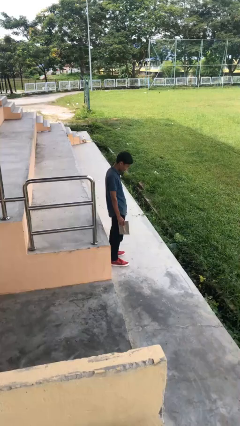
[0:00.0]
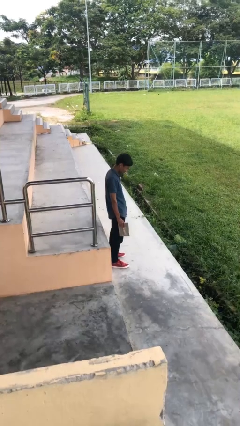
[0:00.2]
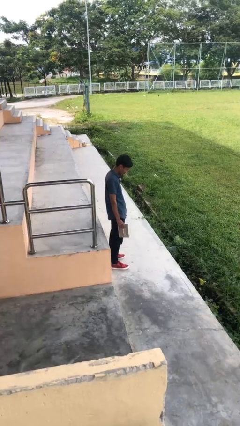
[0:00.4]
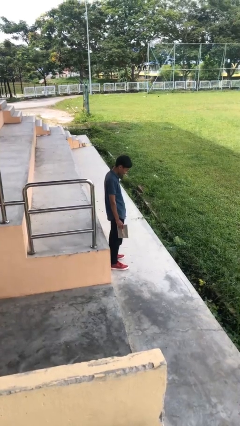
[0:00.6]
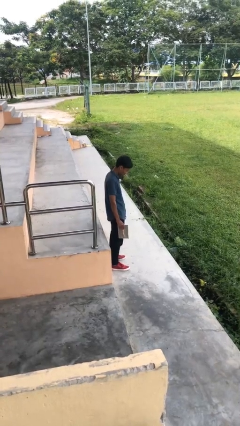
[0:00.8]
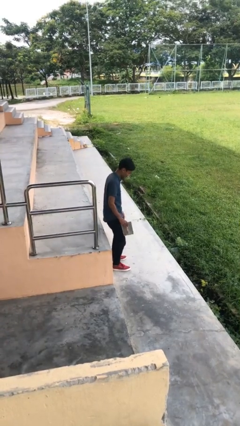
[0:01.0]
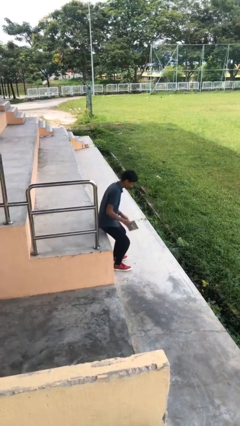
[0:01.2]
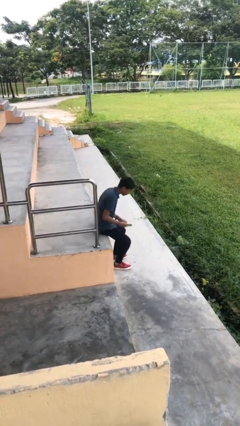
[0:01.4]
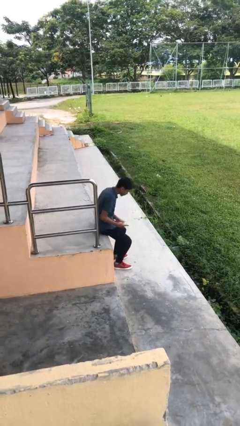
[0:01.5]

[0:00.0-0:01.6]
person sits down

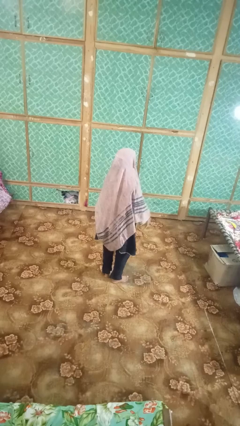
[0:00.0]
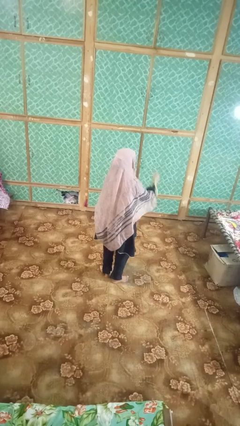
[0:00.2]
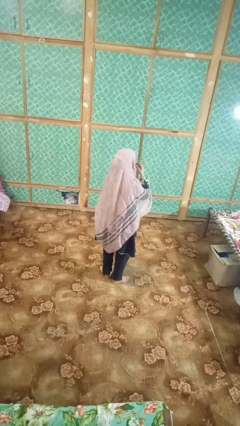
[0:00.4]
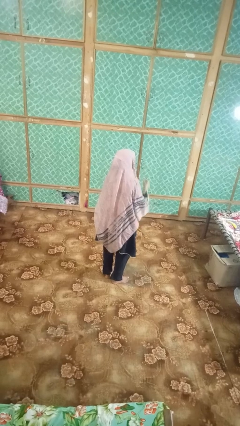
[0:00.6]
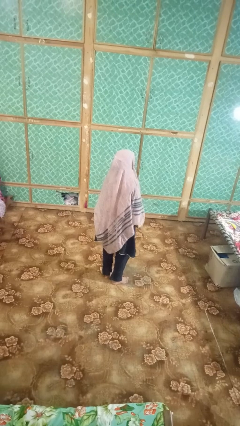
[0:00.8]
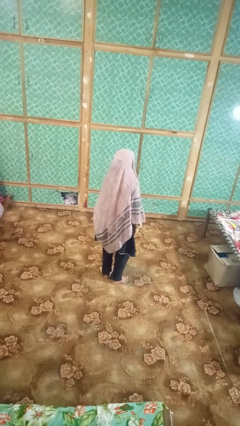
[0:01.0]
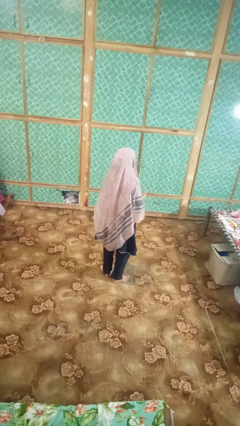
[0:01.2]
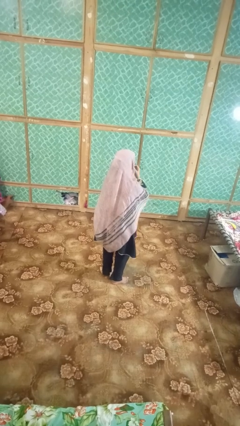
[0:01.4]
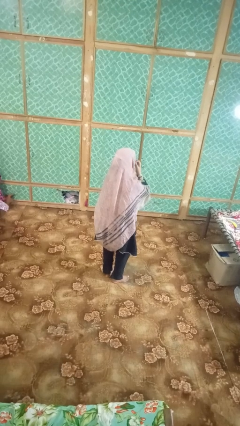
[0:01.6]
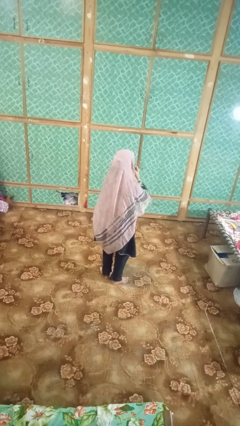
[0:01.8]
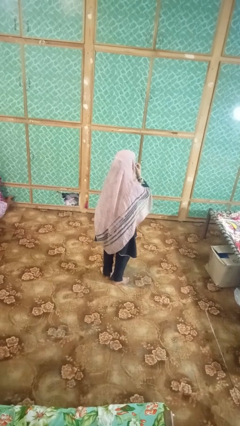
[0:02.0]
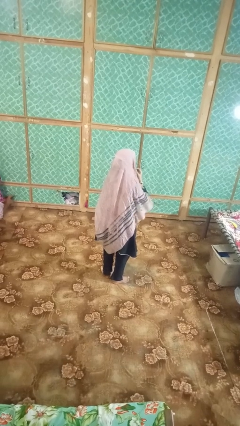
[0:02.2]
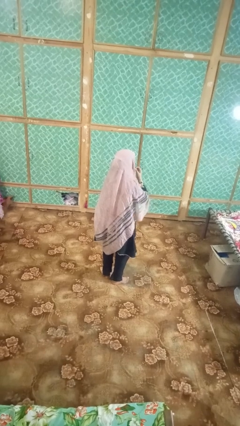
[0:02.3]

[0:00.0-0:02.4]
person strokes chin

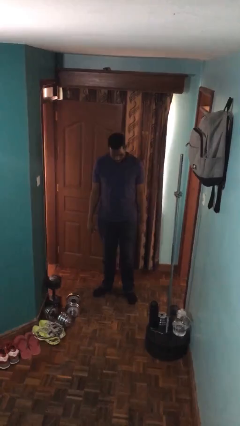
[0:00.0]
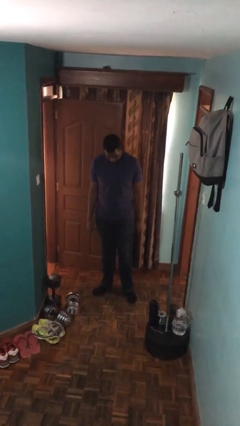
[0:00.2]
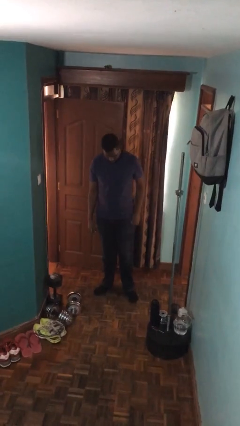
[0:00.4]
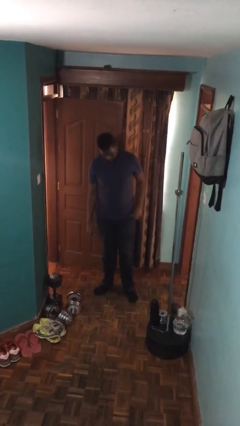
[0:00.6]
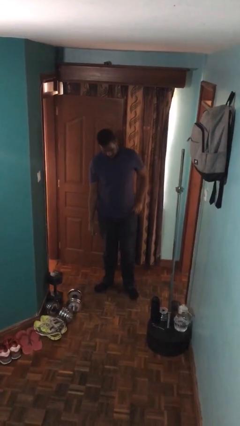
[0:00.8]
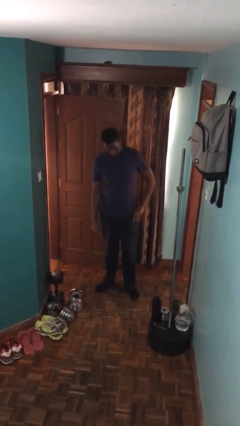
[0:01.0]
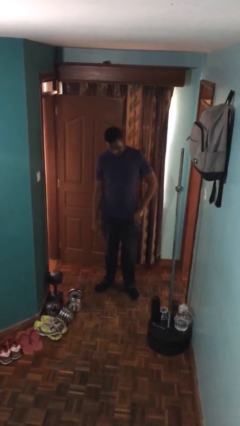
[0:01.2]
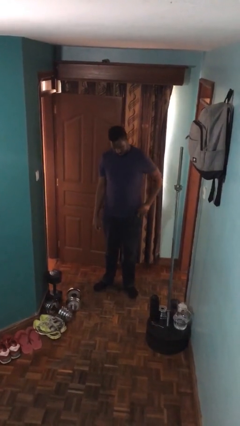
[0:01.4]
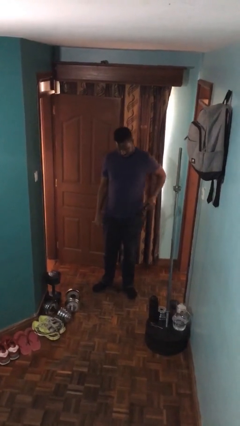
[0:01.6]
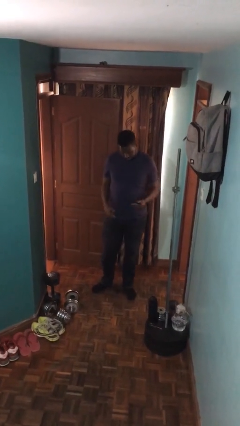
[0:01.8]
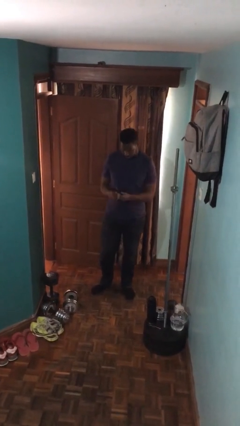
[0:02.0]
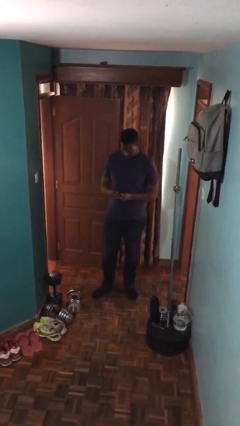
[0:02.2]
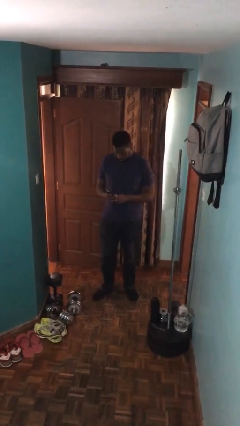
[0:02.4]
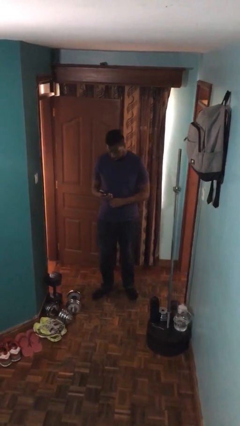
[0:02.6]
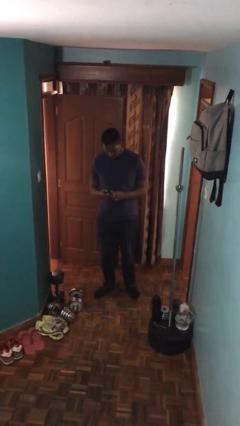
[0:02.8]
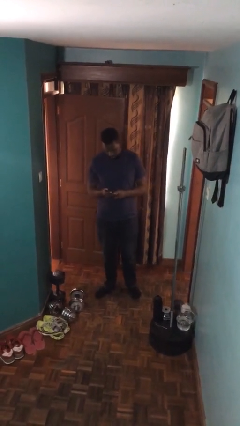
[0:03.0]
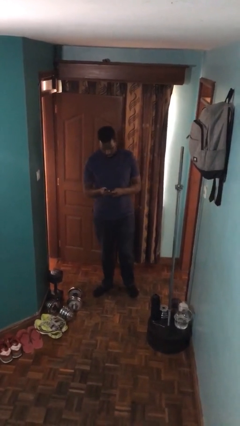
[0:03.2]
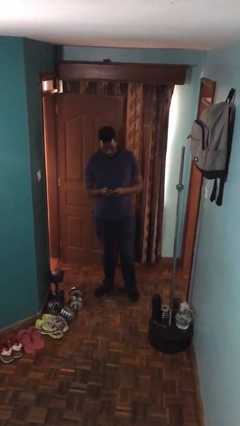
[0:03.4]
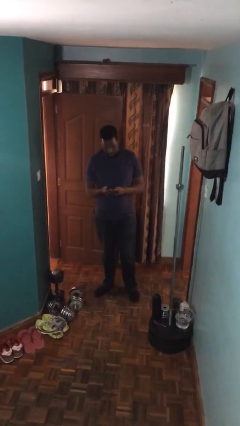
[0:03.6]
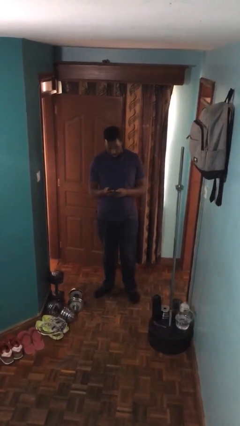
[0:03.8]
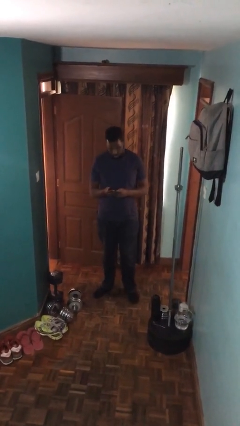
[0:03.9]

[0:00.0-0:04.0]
person takes phone from pocket

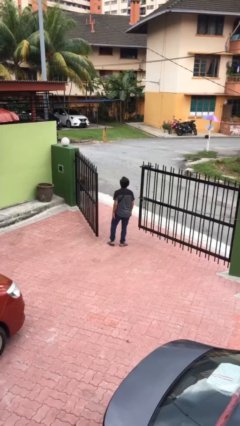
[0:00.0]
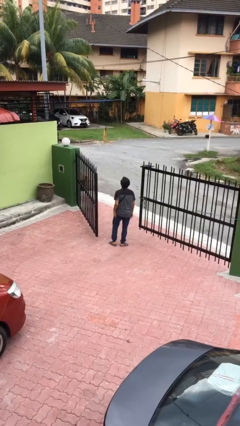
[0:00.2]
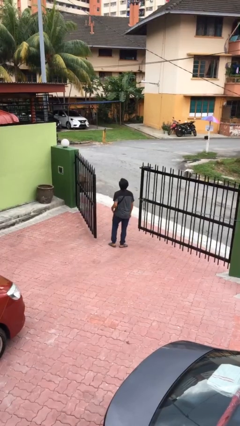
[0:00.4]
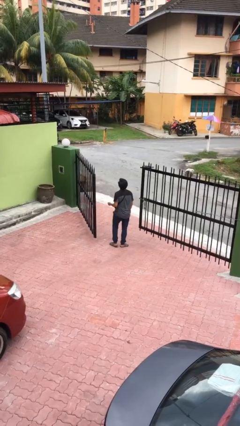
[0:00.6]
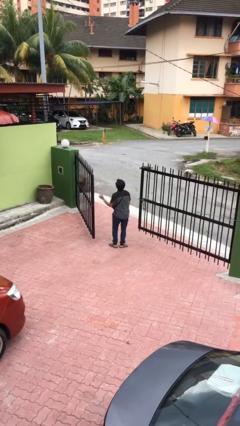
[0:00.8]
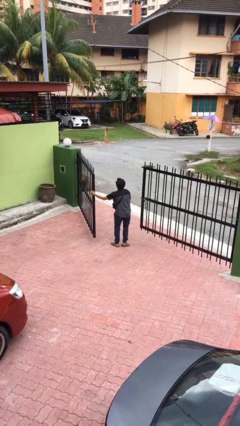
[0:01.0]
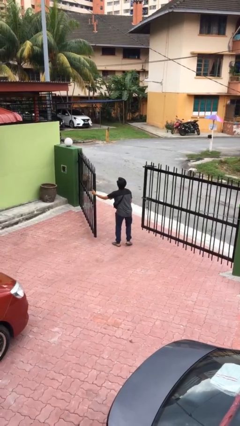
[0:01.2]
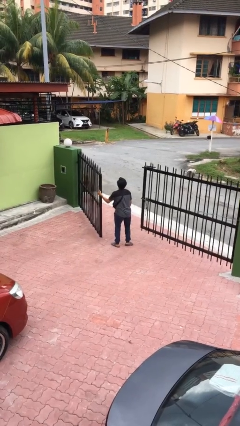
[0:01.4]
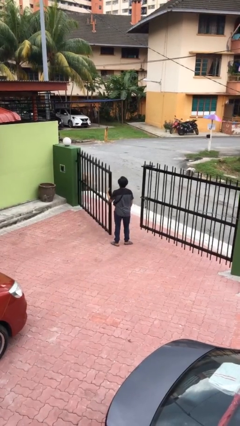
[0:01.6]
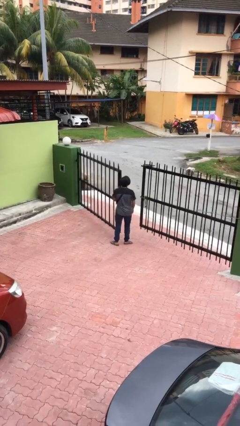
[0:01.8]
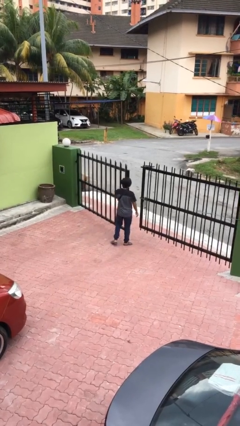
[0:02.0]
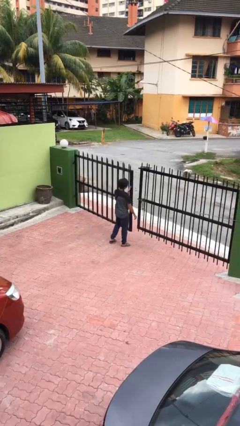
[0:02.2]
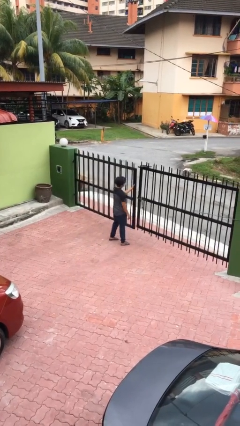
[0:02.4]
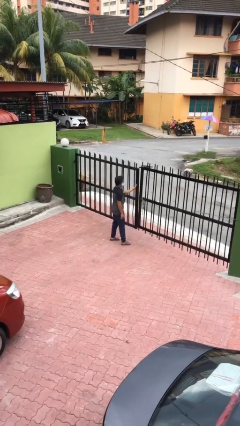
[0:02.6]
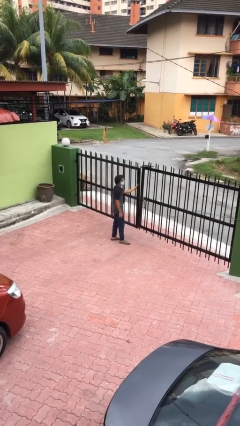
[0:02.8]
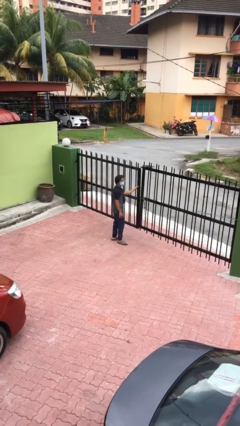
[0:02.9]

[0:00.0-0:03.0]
person closes facility door

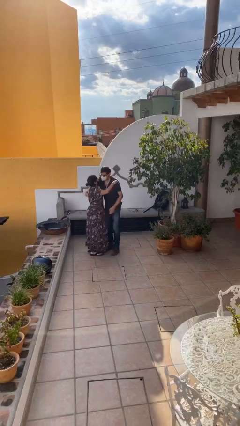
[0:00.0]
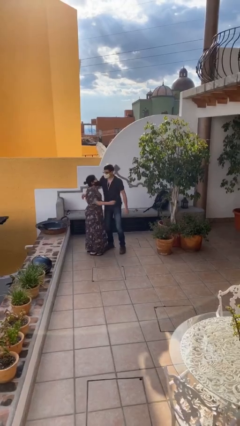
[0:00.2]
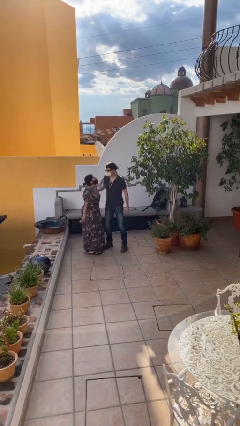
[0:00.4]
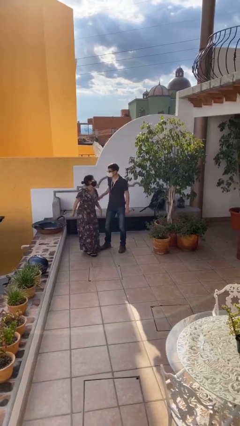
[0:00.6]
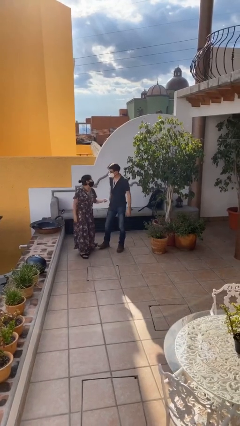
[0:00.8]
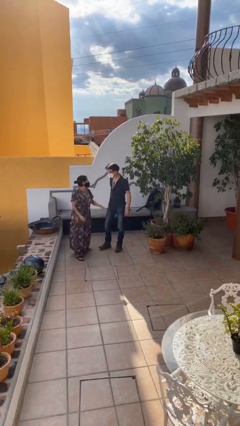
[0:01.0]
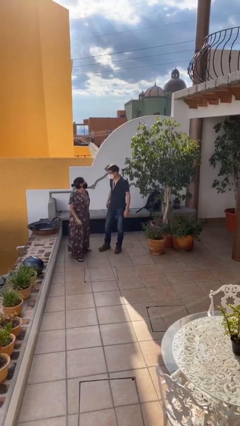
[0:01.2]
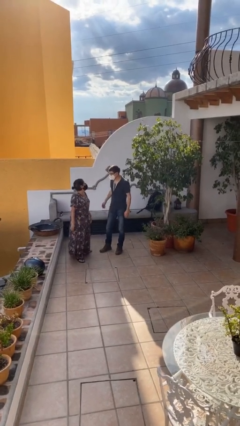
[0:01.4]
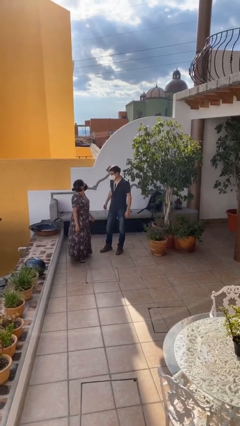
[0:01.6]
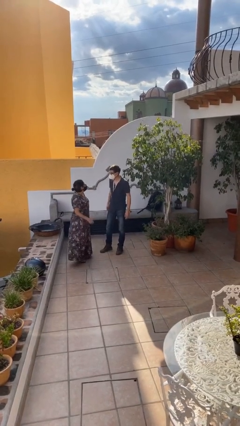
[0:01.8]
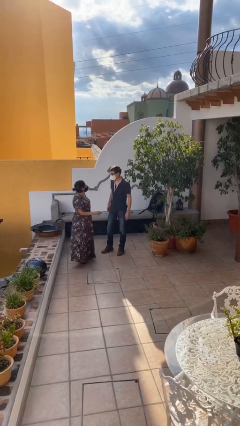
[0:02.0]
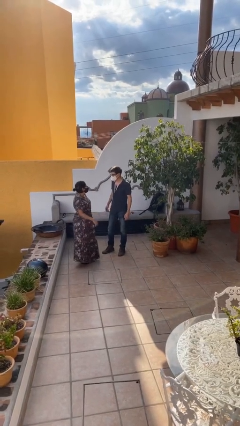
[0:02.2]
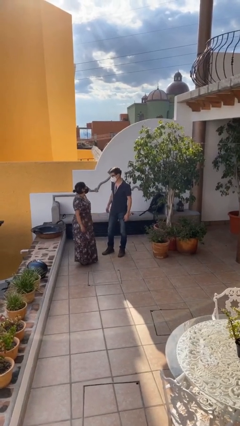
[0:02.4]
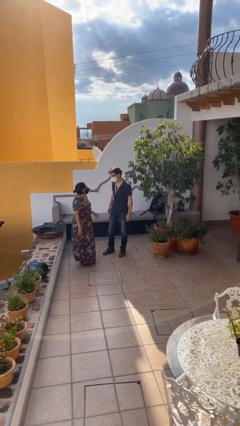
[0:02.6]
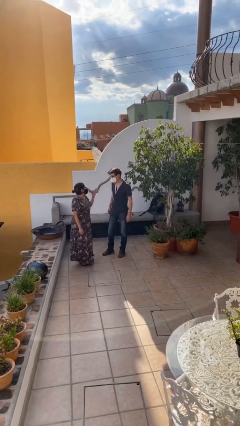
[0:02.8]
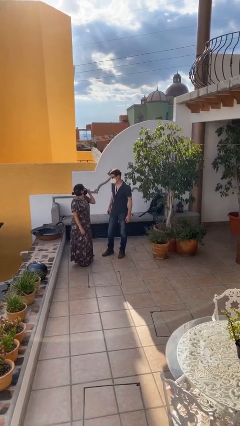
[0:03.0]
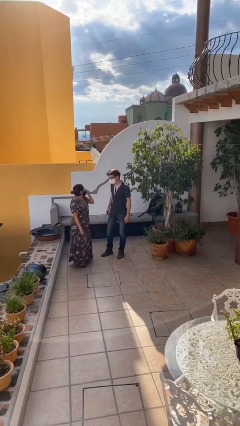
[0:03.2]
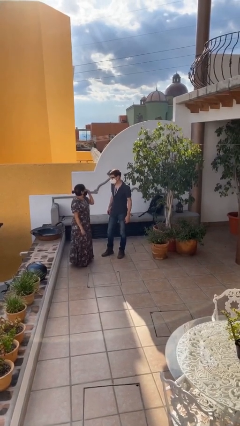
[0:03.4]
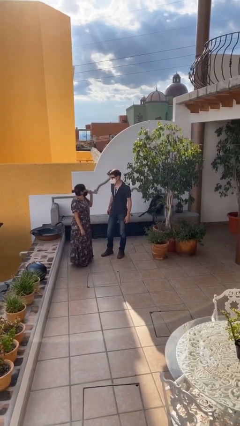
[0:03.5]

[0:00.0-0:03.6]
person talks to person

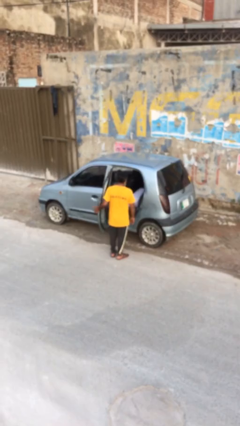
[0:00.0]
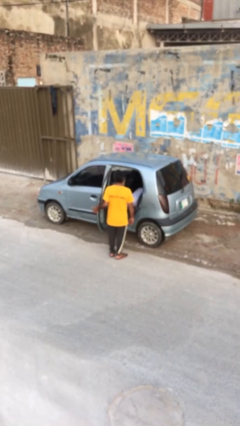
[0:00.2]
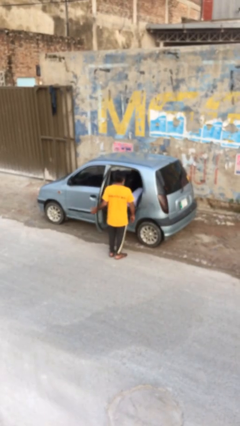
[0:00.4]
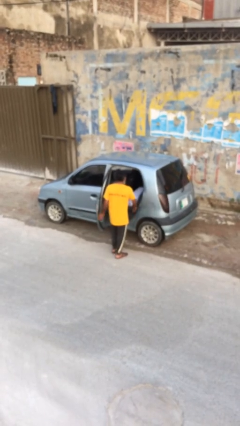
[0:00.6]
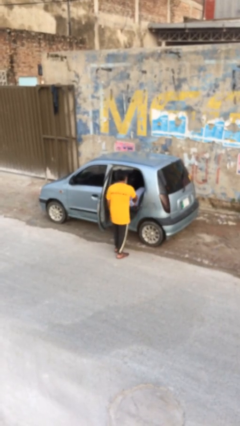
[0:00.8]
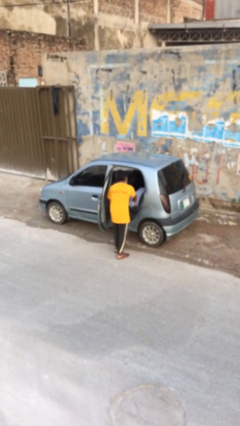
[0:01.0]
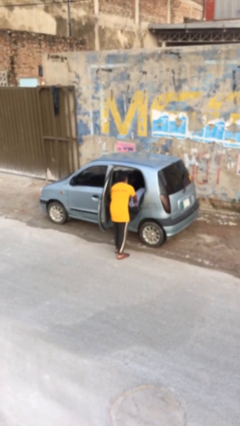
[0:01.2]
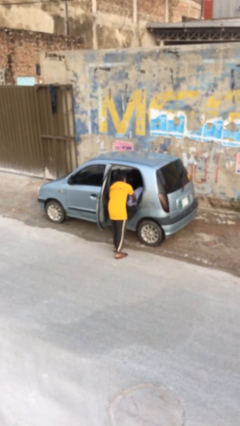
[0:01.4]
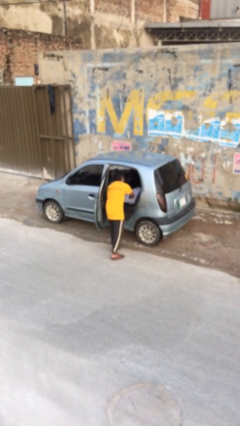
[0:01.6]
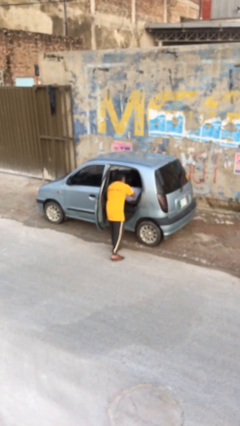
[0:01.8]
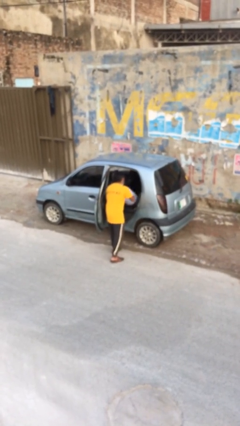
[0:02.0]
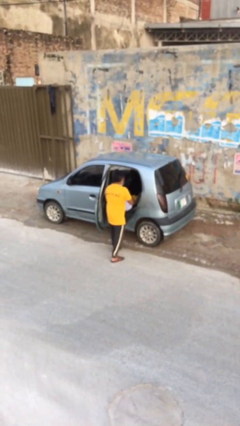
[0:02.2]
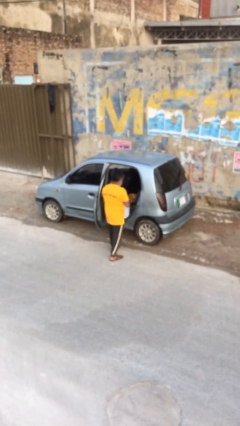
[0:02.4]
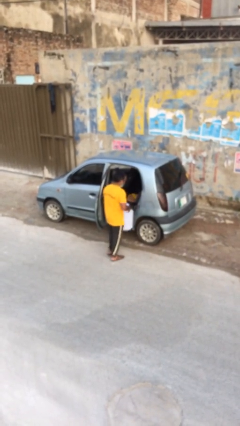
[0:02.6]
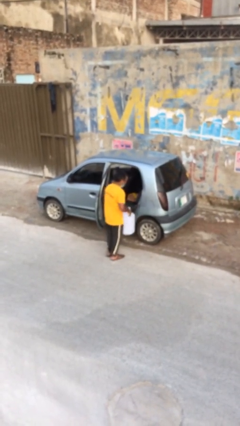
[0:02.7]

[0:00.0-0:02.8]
person unloads car

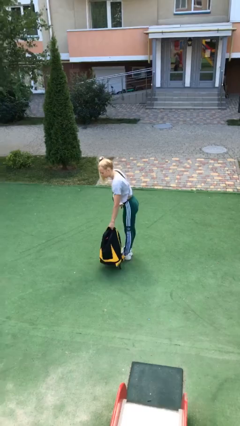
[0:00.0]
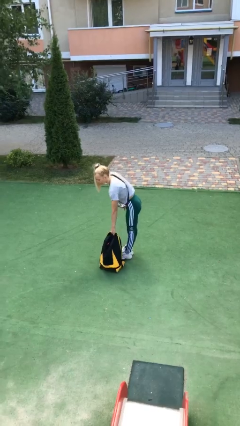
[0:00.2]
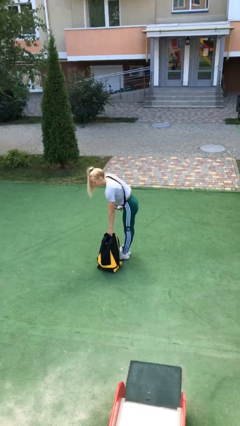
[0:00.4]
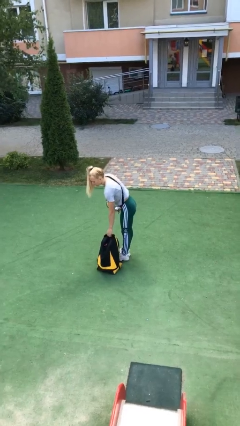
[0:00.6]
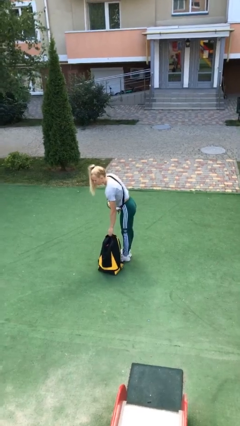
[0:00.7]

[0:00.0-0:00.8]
person puts down object on floor
